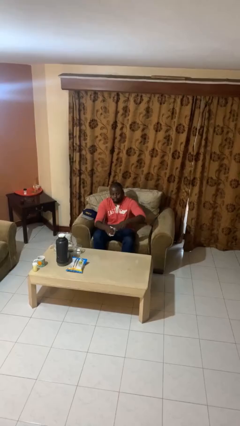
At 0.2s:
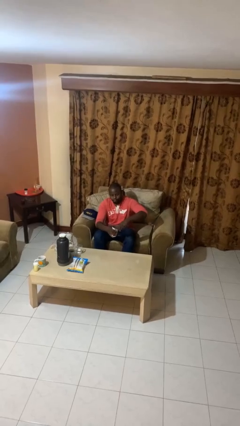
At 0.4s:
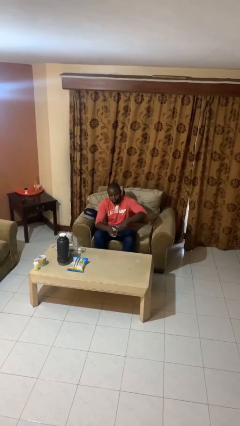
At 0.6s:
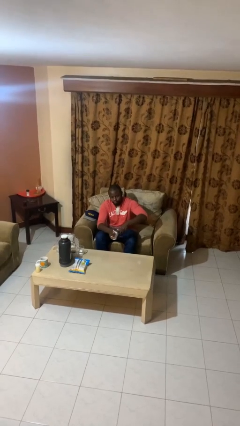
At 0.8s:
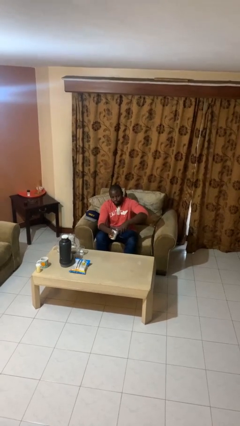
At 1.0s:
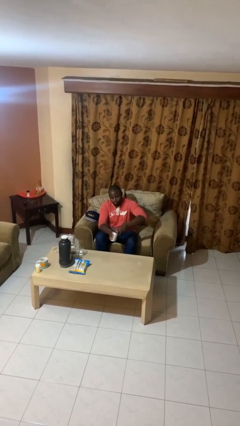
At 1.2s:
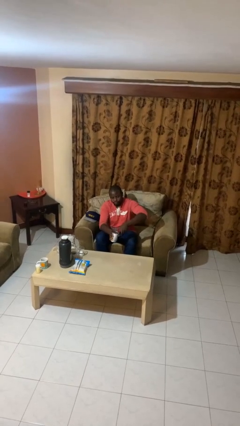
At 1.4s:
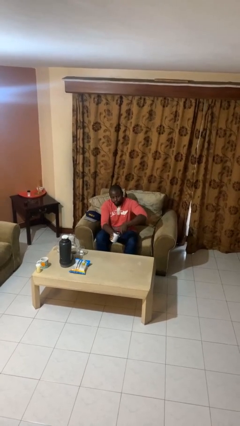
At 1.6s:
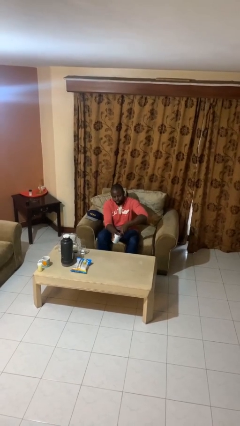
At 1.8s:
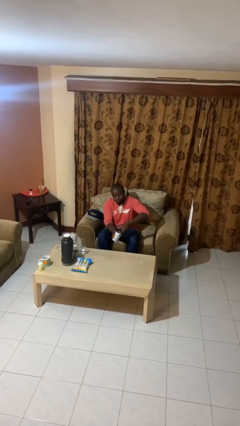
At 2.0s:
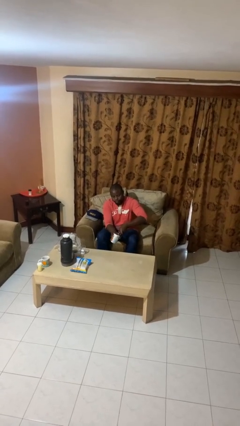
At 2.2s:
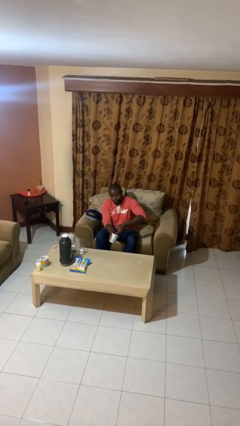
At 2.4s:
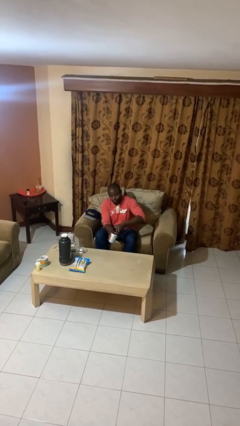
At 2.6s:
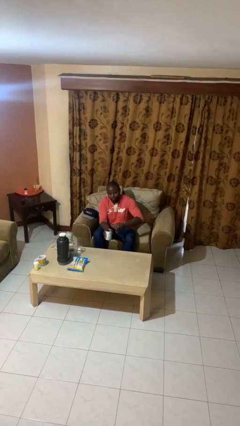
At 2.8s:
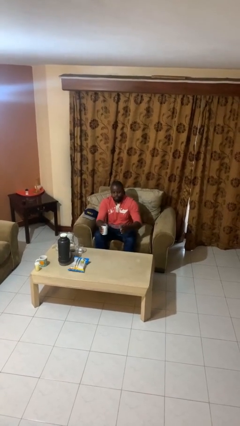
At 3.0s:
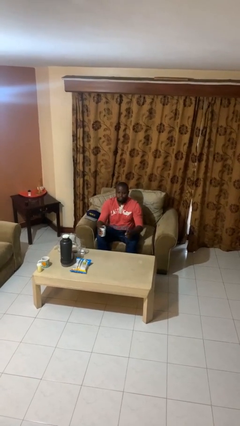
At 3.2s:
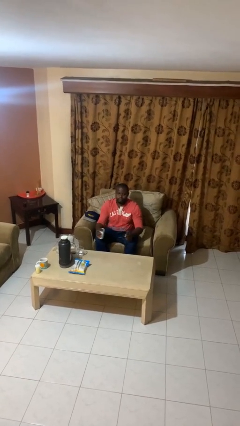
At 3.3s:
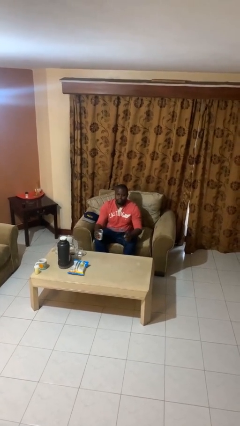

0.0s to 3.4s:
person opens can with can opener

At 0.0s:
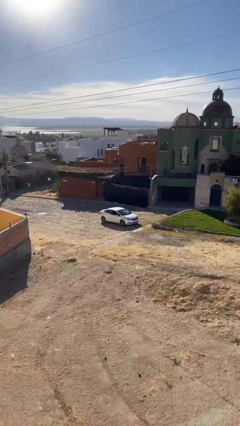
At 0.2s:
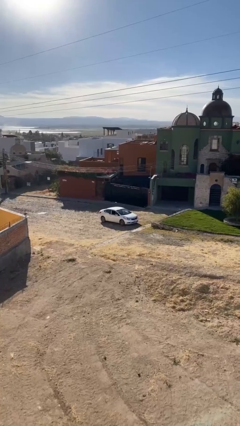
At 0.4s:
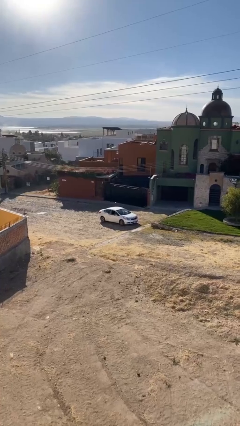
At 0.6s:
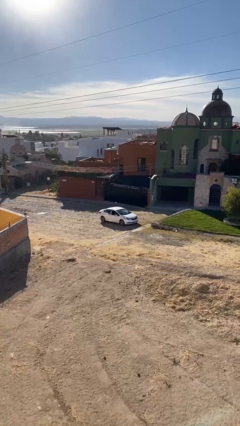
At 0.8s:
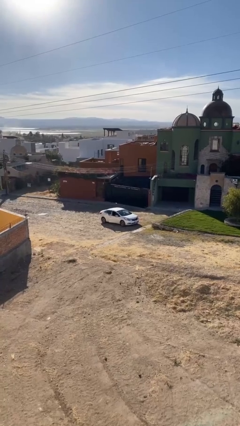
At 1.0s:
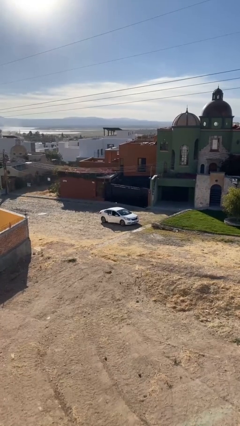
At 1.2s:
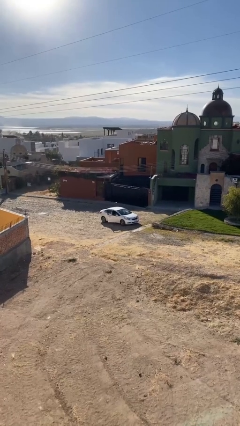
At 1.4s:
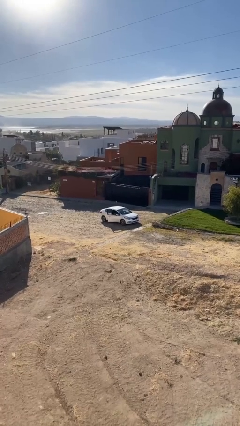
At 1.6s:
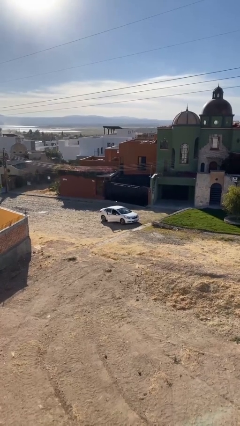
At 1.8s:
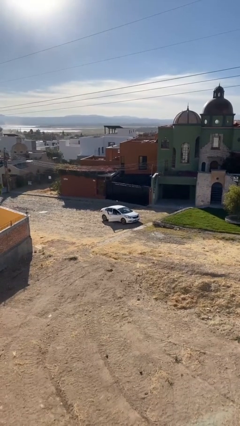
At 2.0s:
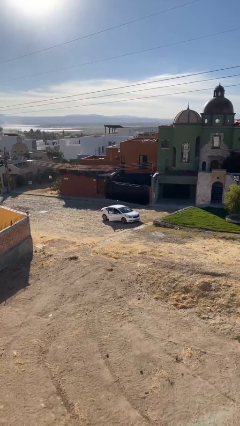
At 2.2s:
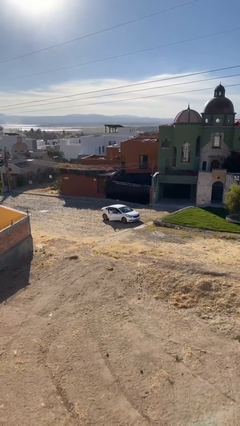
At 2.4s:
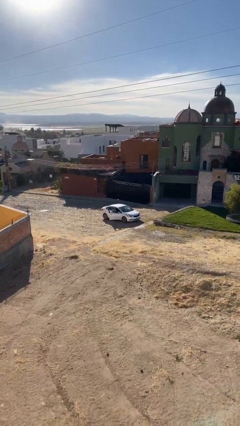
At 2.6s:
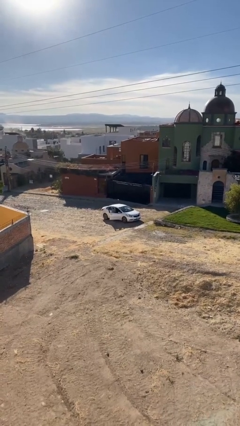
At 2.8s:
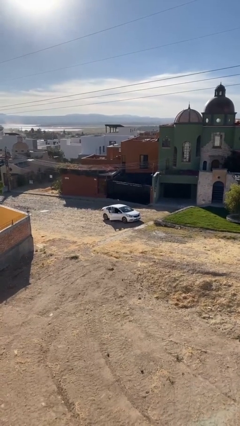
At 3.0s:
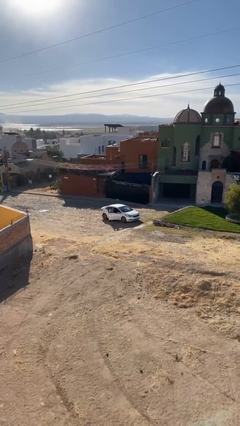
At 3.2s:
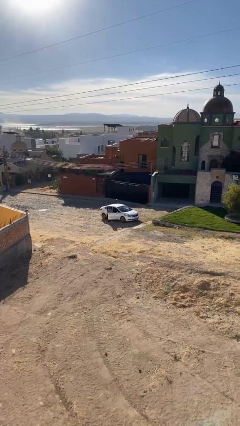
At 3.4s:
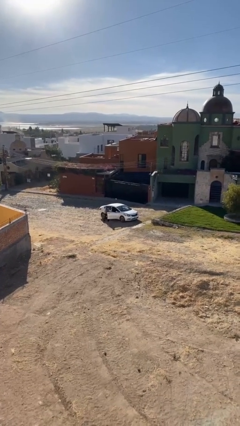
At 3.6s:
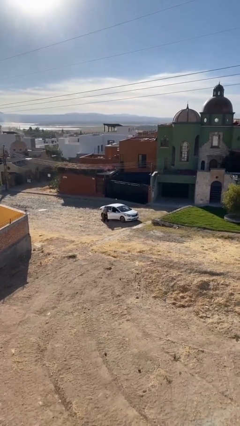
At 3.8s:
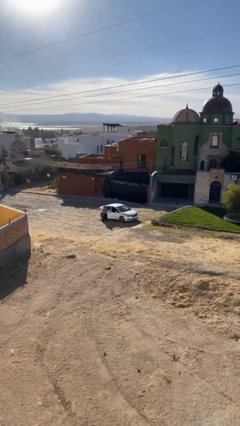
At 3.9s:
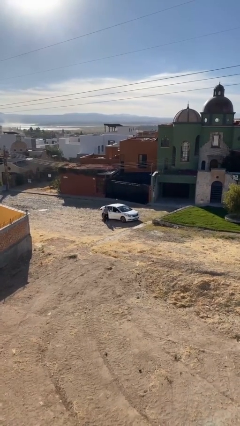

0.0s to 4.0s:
car drops off person

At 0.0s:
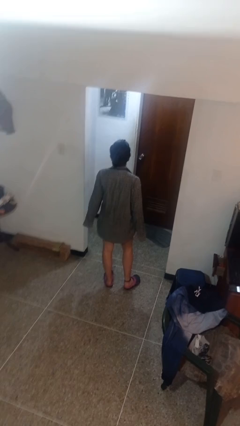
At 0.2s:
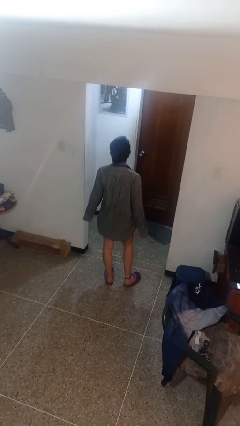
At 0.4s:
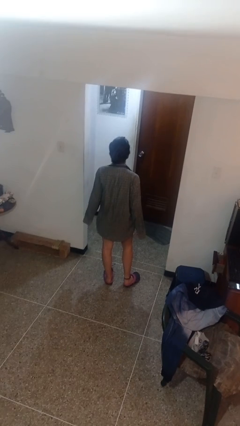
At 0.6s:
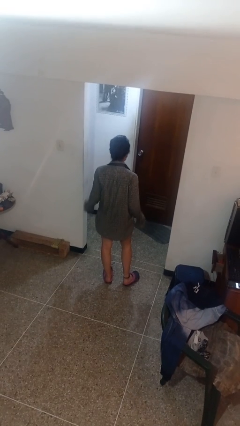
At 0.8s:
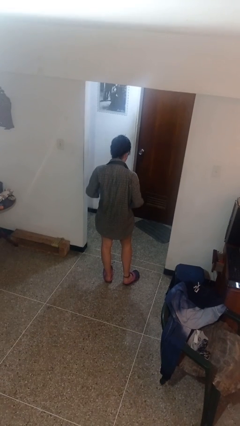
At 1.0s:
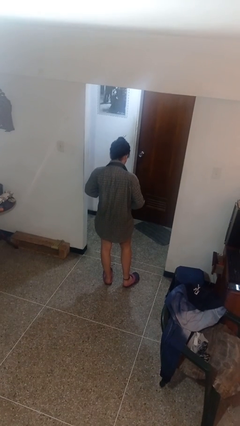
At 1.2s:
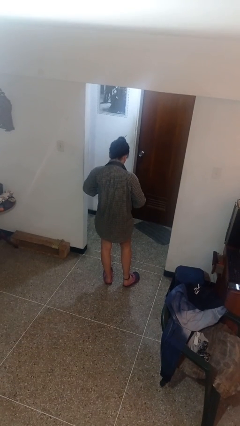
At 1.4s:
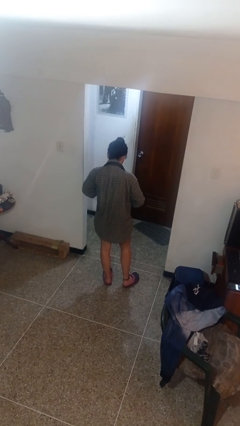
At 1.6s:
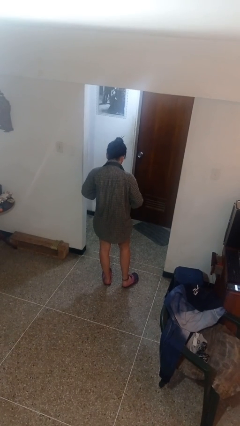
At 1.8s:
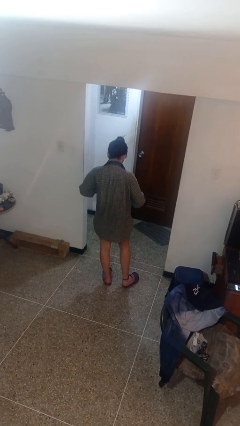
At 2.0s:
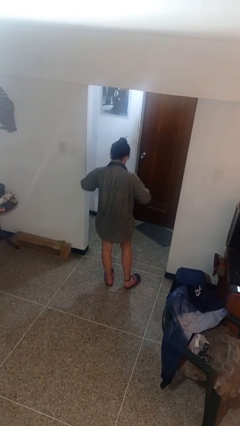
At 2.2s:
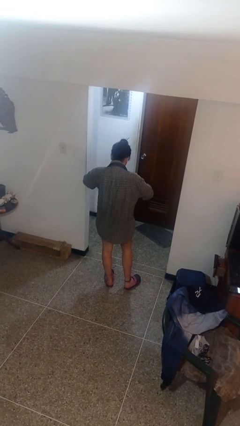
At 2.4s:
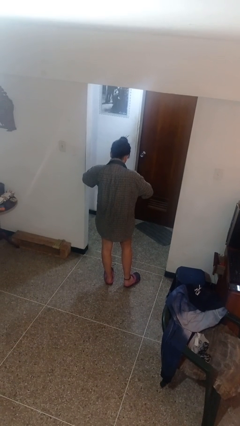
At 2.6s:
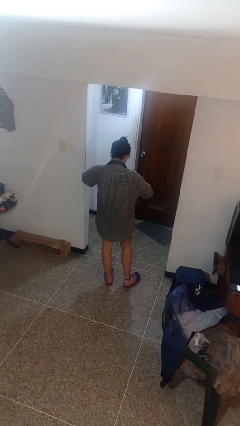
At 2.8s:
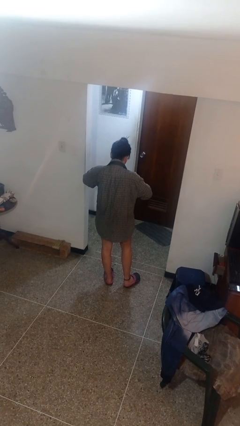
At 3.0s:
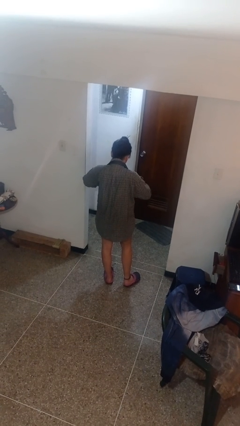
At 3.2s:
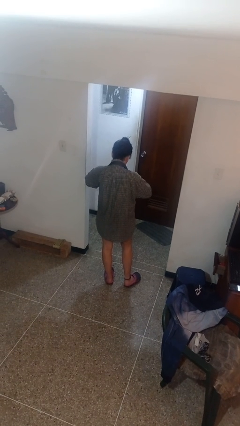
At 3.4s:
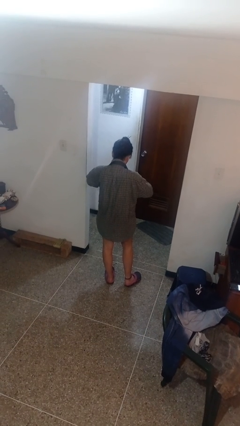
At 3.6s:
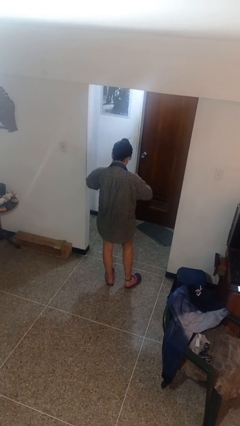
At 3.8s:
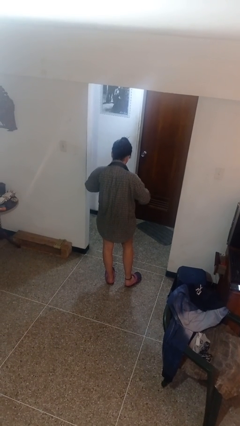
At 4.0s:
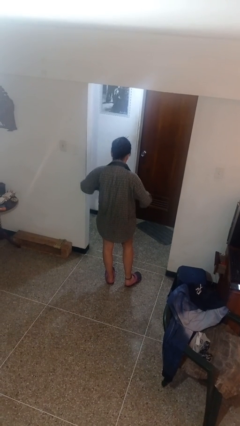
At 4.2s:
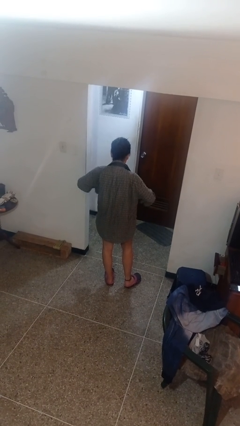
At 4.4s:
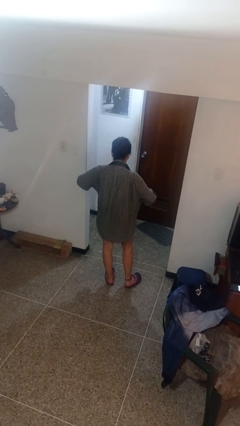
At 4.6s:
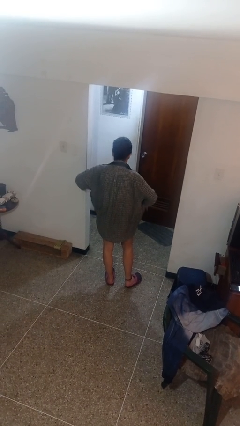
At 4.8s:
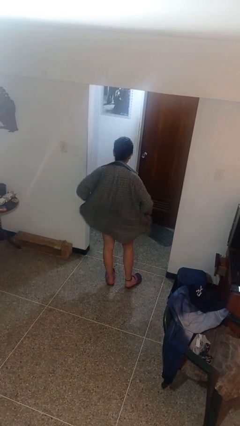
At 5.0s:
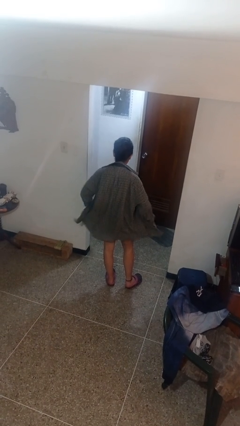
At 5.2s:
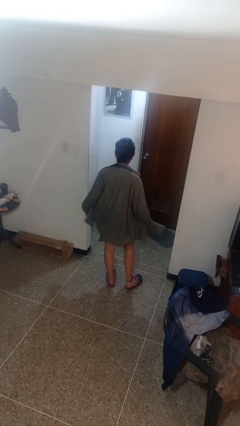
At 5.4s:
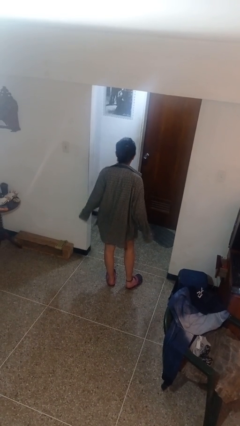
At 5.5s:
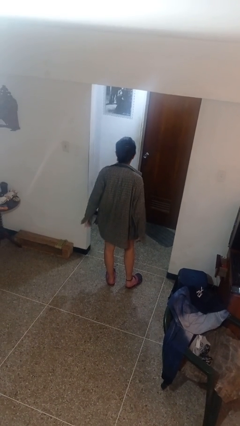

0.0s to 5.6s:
person unbuttons shirt

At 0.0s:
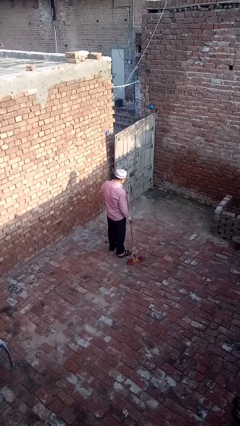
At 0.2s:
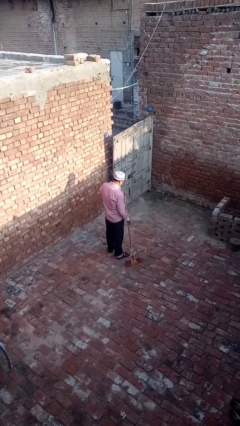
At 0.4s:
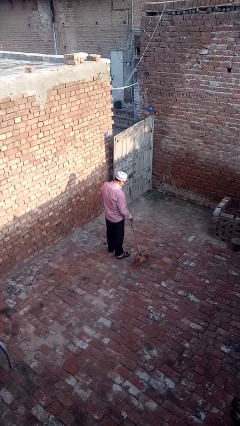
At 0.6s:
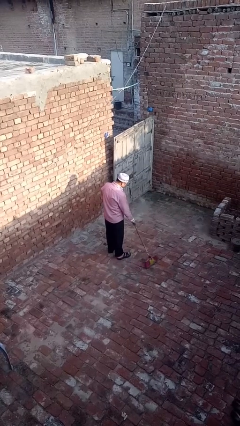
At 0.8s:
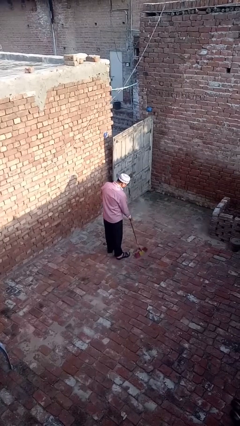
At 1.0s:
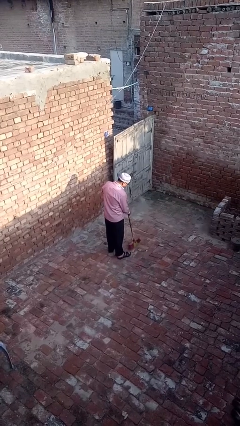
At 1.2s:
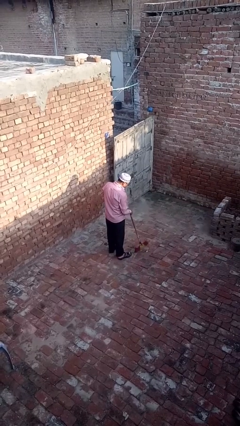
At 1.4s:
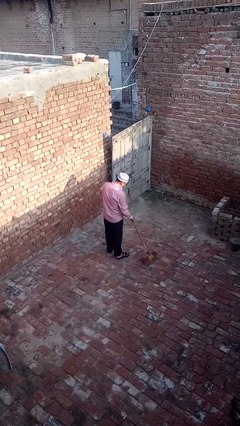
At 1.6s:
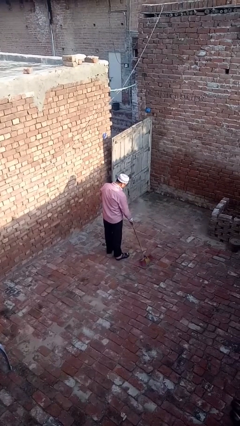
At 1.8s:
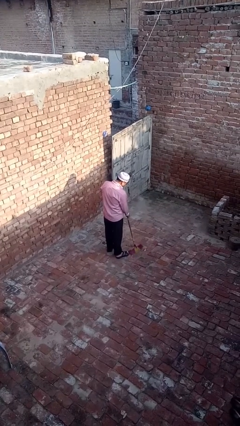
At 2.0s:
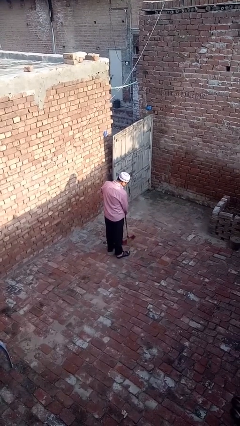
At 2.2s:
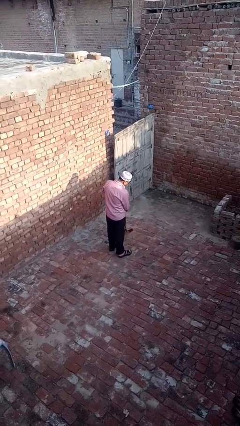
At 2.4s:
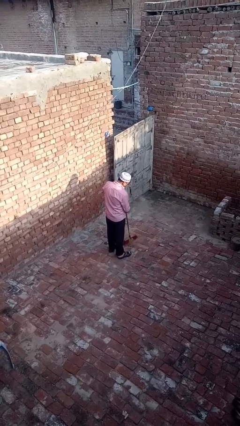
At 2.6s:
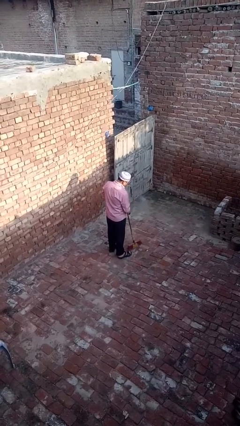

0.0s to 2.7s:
person sweeps floor

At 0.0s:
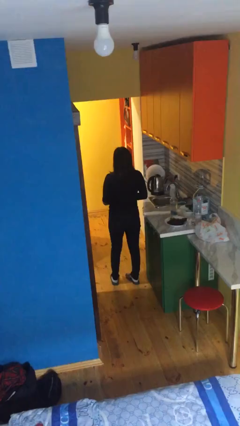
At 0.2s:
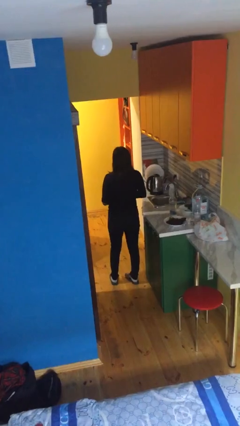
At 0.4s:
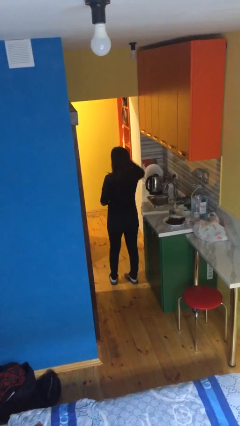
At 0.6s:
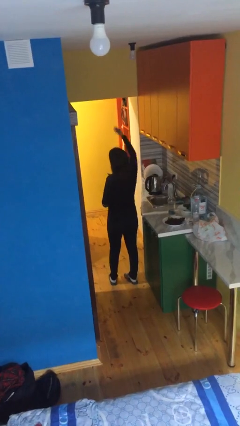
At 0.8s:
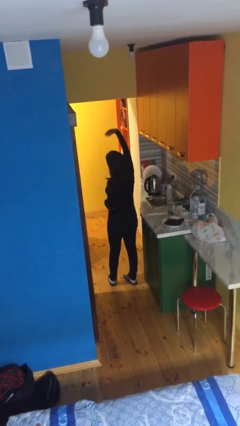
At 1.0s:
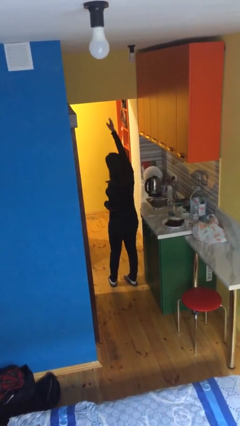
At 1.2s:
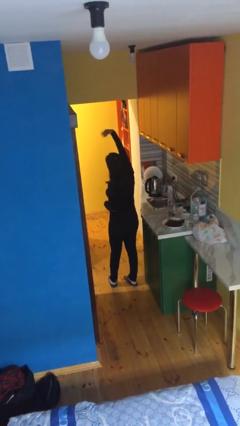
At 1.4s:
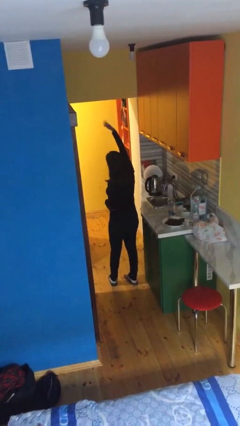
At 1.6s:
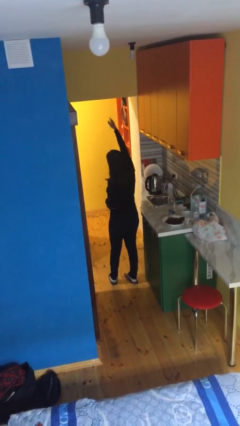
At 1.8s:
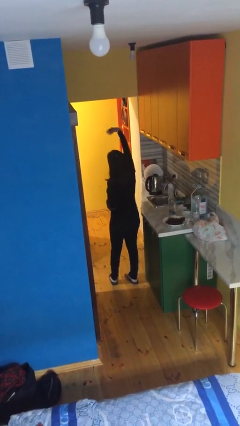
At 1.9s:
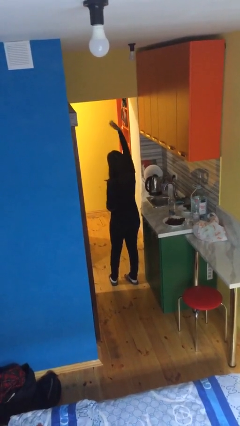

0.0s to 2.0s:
person gestures come here
